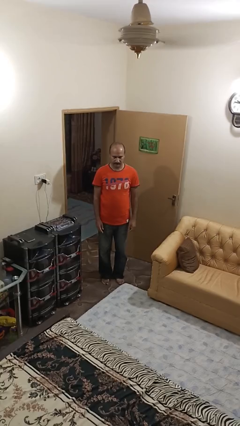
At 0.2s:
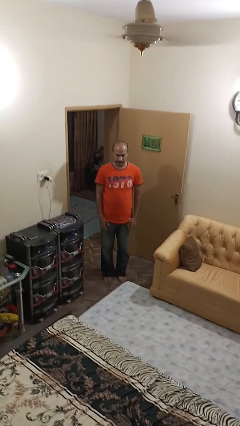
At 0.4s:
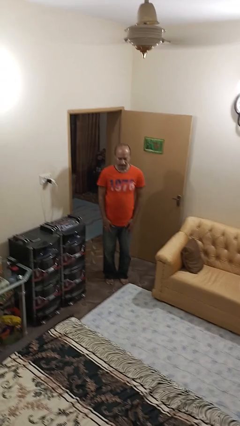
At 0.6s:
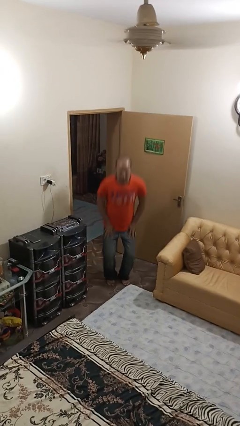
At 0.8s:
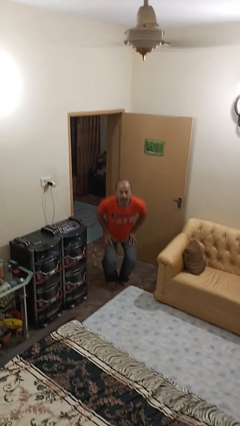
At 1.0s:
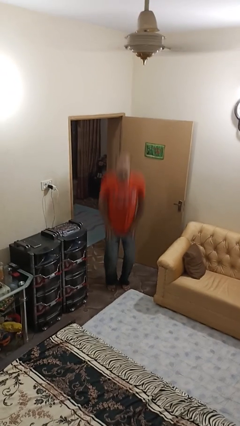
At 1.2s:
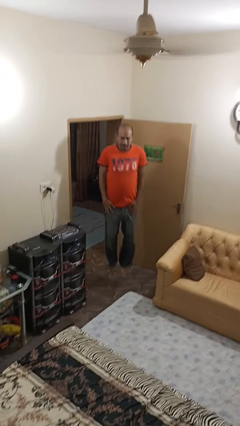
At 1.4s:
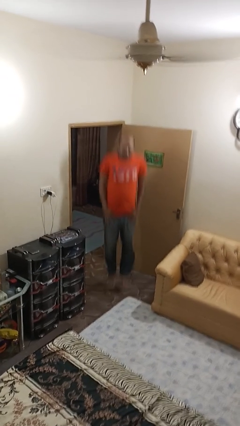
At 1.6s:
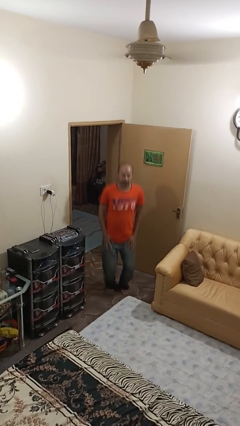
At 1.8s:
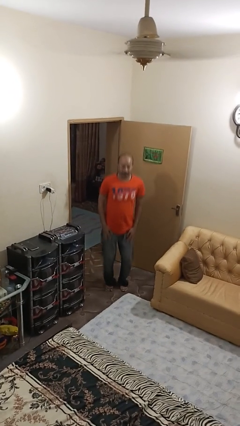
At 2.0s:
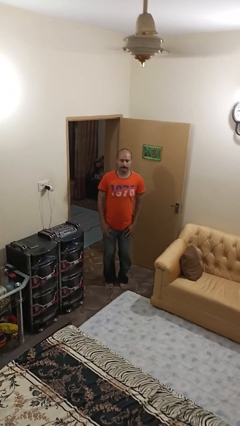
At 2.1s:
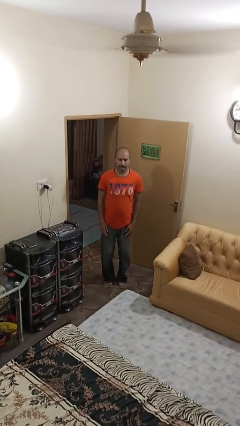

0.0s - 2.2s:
person jumps

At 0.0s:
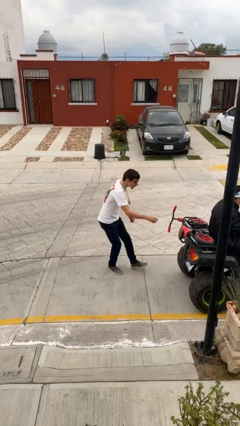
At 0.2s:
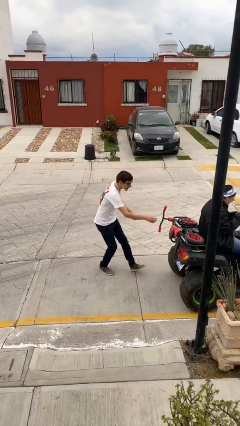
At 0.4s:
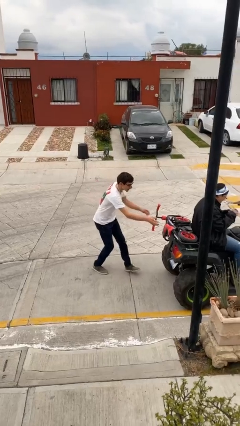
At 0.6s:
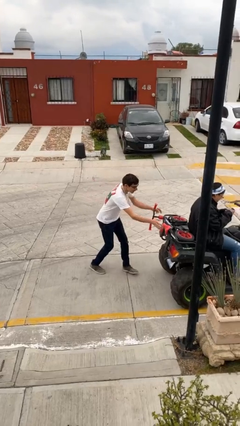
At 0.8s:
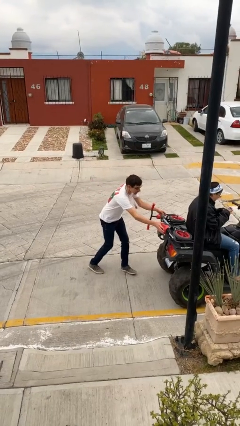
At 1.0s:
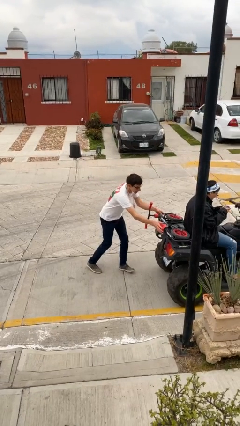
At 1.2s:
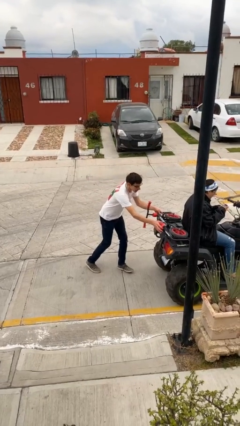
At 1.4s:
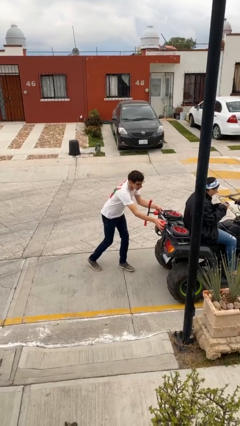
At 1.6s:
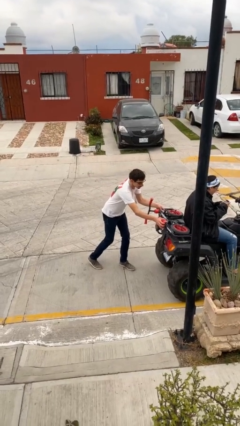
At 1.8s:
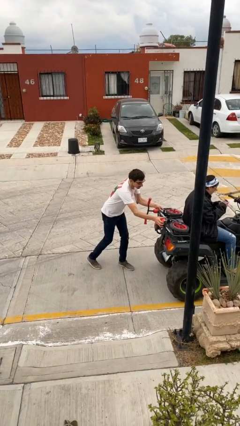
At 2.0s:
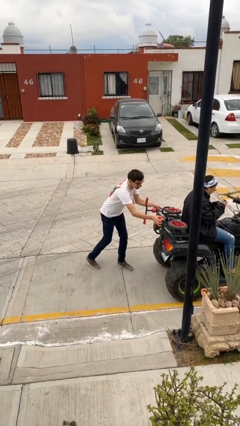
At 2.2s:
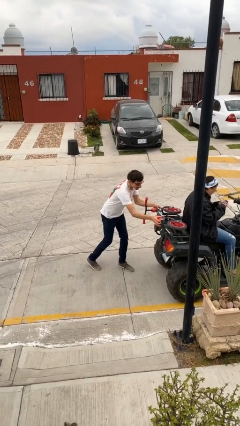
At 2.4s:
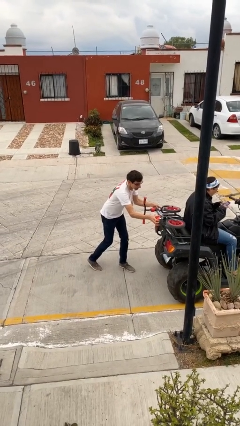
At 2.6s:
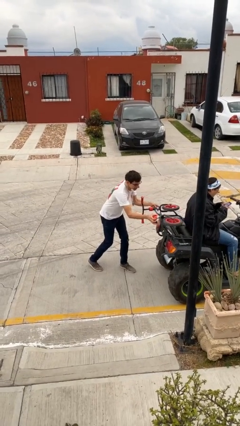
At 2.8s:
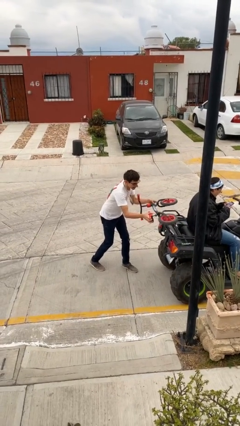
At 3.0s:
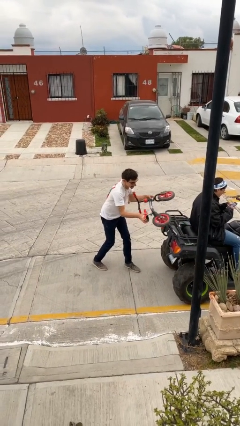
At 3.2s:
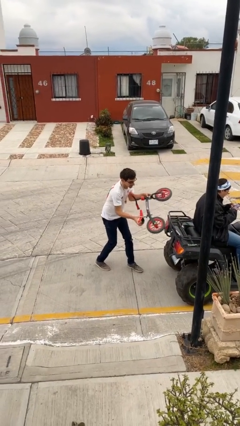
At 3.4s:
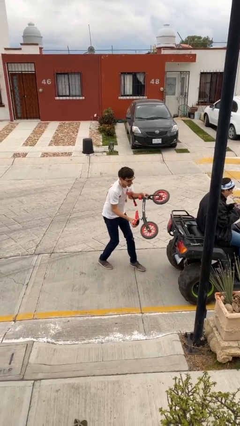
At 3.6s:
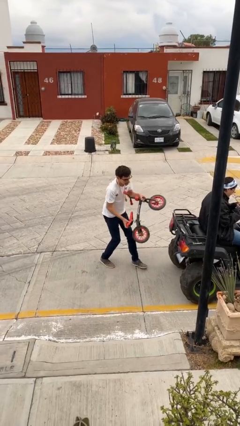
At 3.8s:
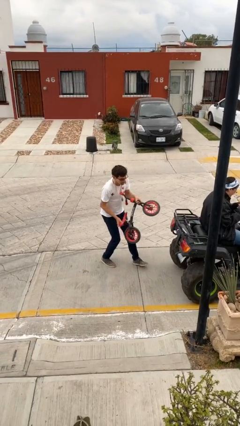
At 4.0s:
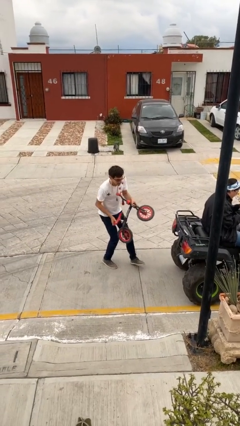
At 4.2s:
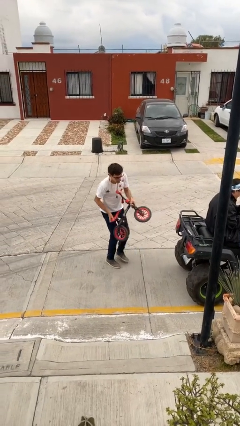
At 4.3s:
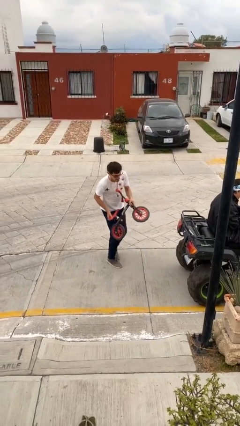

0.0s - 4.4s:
person steals object from person

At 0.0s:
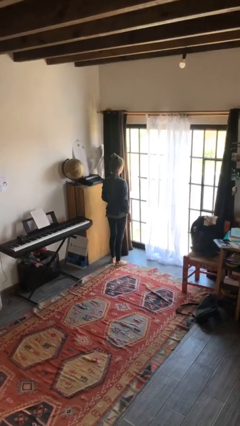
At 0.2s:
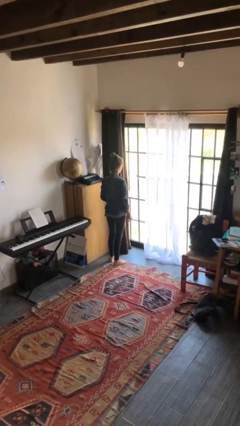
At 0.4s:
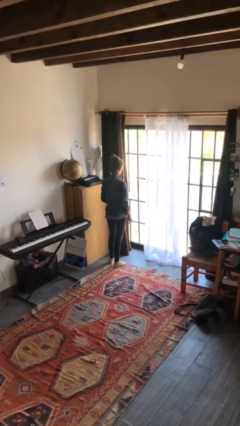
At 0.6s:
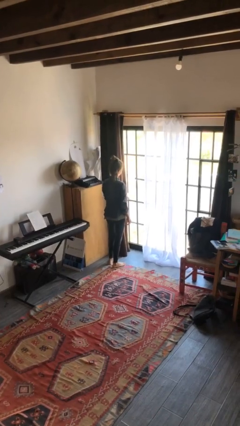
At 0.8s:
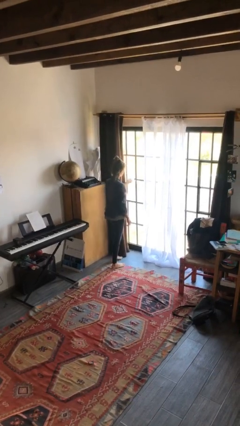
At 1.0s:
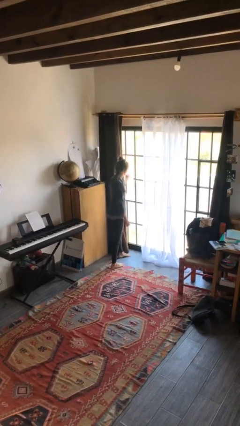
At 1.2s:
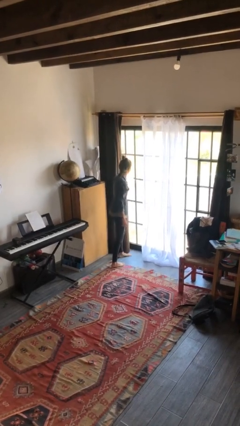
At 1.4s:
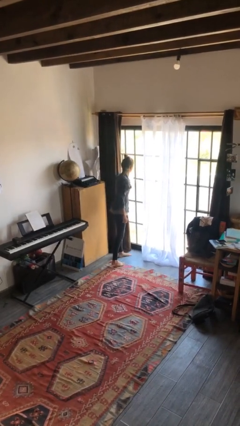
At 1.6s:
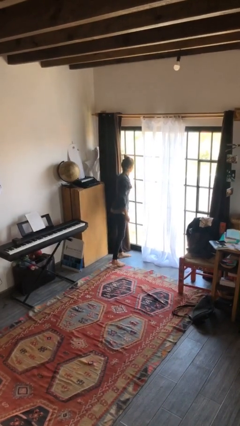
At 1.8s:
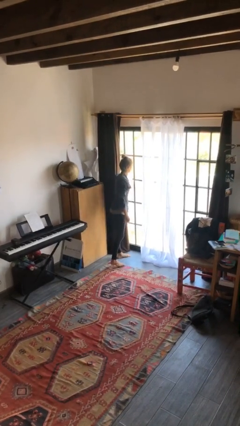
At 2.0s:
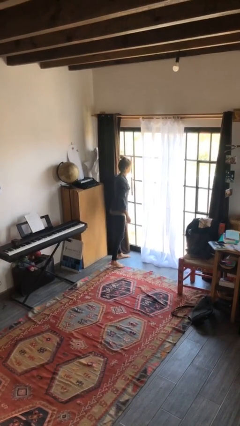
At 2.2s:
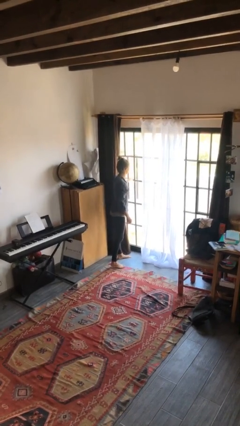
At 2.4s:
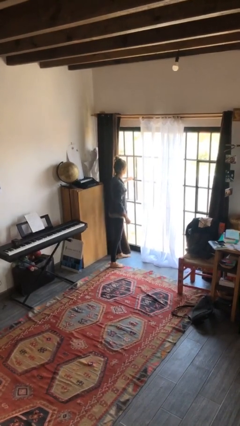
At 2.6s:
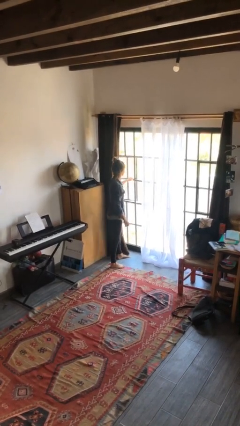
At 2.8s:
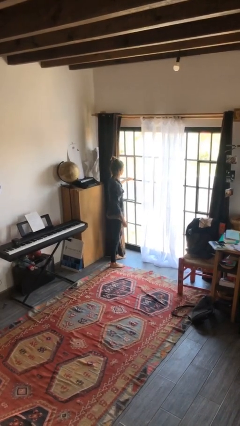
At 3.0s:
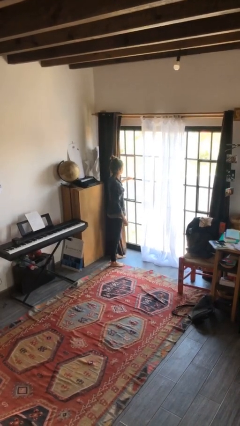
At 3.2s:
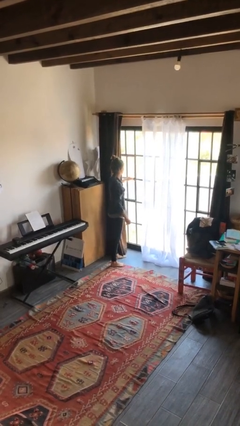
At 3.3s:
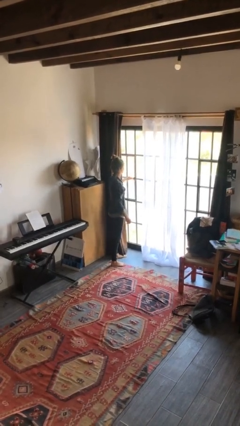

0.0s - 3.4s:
person closes home window

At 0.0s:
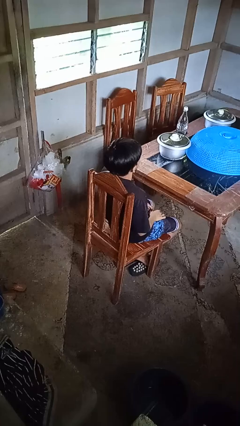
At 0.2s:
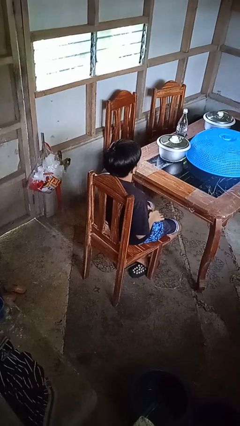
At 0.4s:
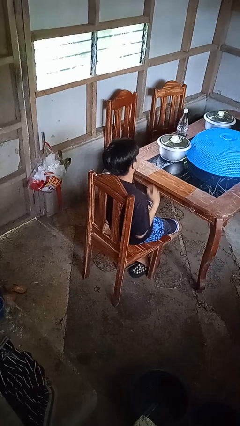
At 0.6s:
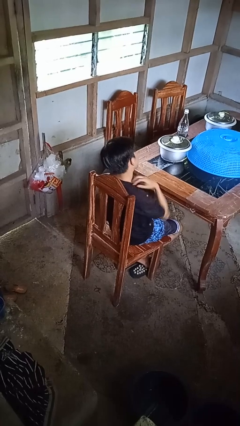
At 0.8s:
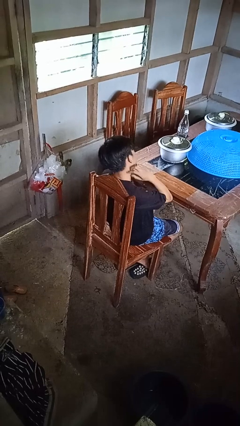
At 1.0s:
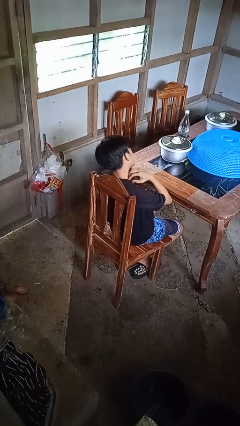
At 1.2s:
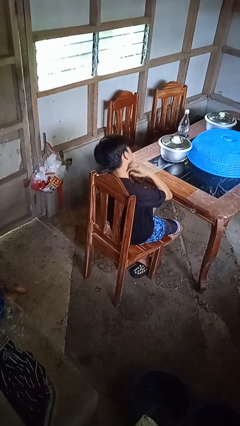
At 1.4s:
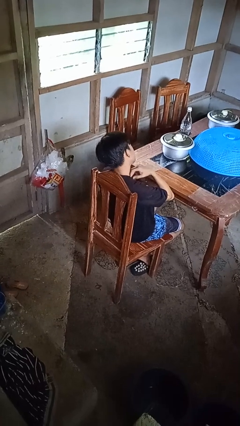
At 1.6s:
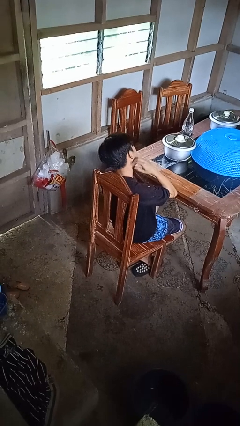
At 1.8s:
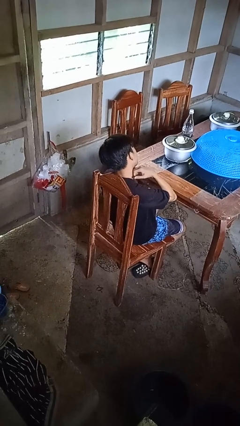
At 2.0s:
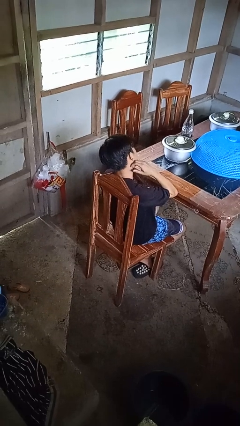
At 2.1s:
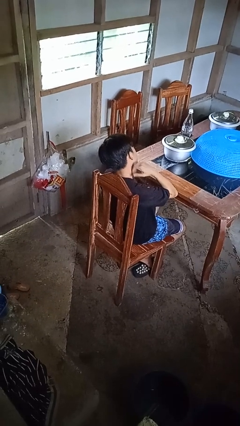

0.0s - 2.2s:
person rubs neck

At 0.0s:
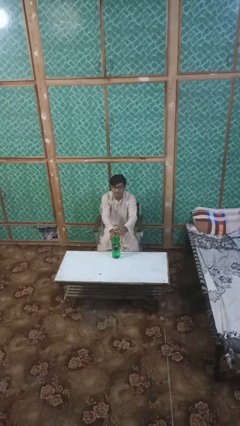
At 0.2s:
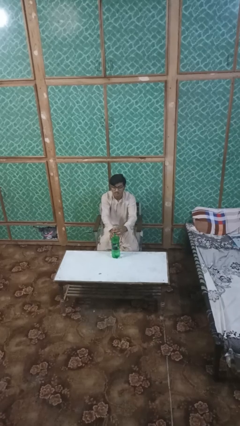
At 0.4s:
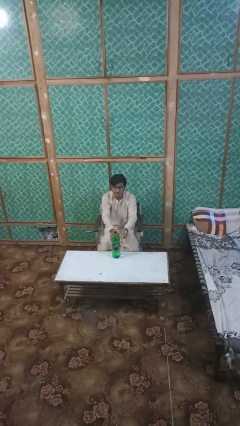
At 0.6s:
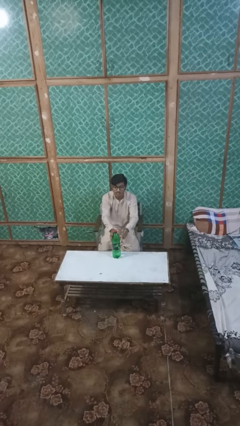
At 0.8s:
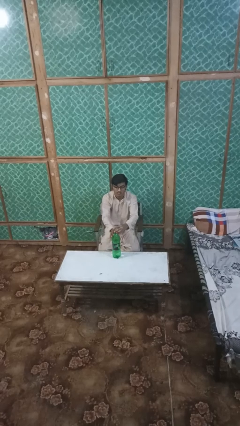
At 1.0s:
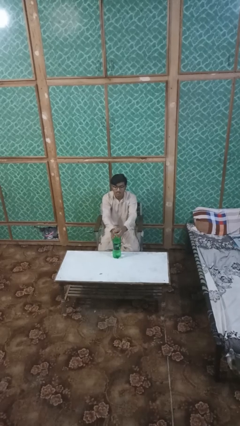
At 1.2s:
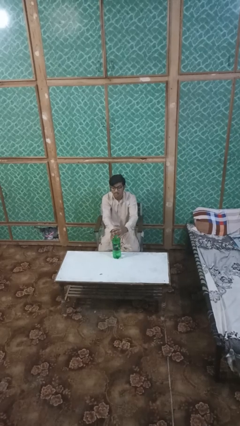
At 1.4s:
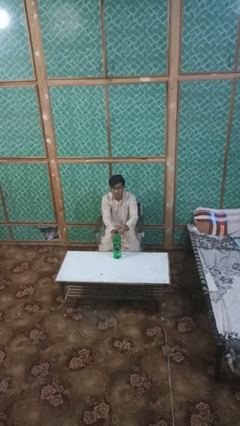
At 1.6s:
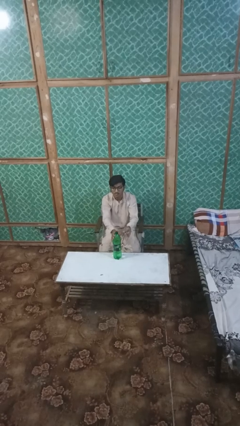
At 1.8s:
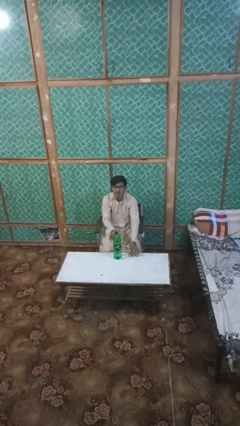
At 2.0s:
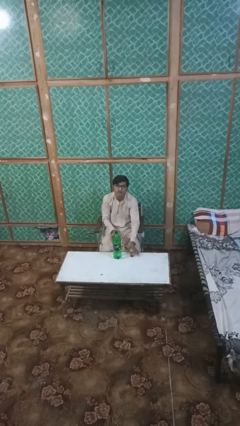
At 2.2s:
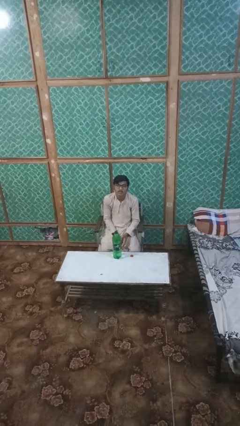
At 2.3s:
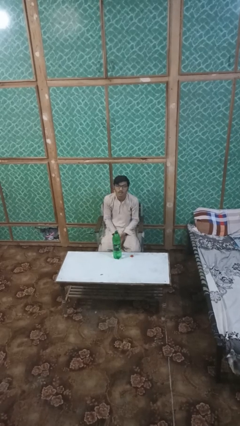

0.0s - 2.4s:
person unscrews lid from bottle

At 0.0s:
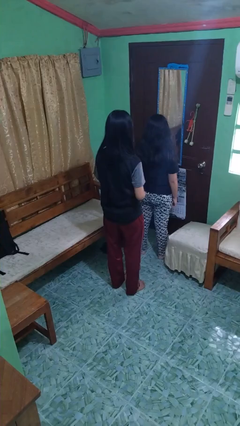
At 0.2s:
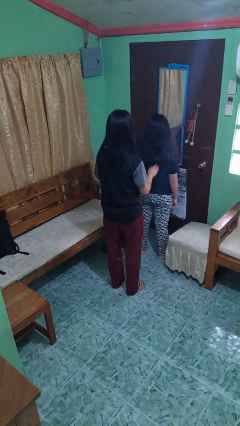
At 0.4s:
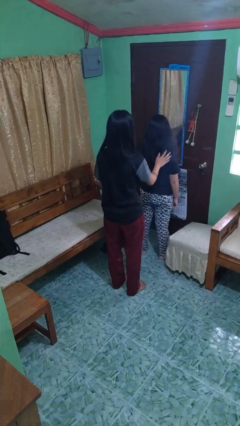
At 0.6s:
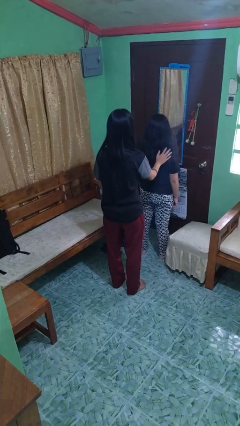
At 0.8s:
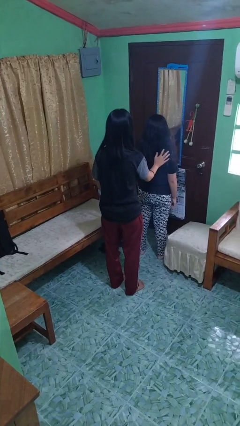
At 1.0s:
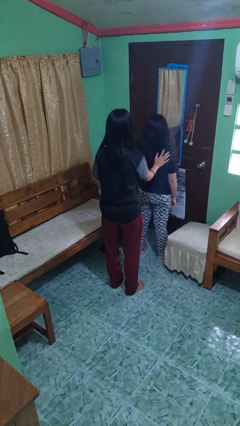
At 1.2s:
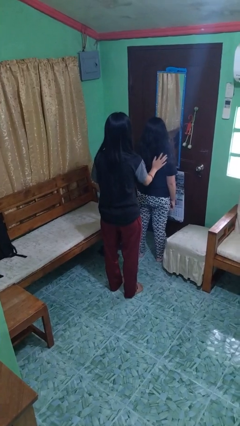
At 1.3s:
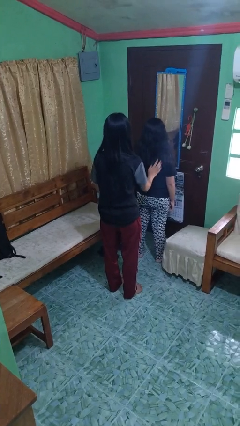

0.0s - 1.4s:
person touches back of person

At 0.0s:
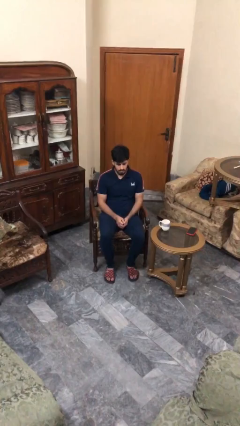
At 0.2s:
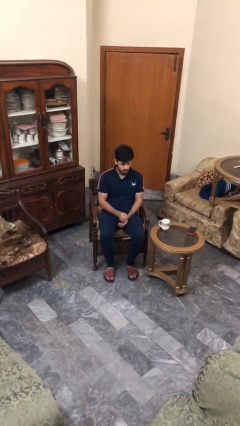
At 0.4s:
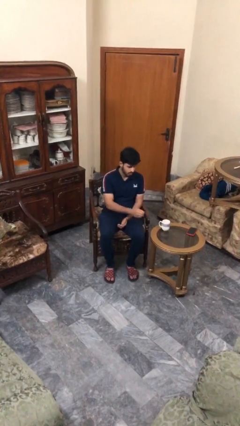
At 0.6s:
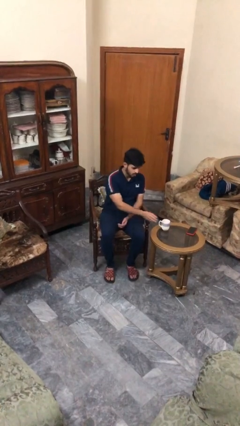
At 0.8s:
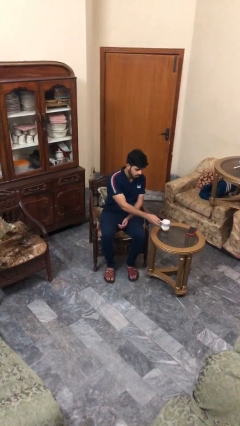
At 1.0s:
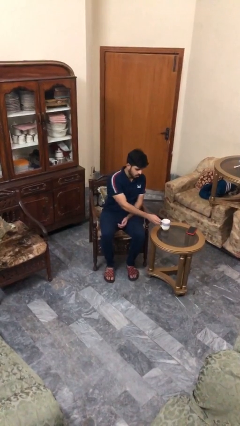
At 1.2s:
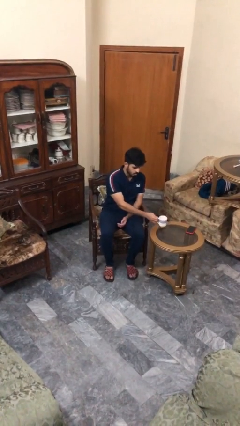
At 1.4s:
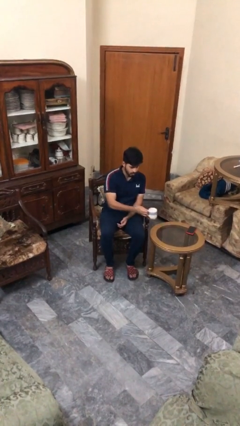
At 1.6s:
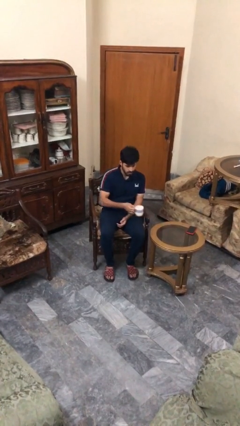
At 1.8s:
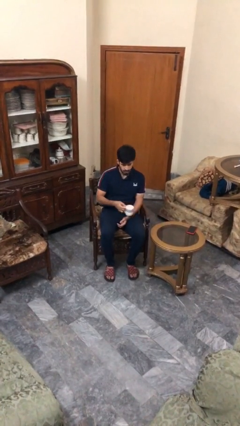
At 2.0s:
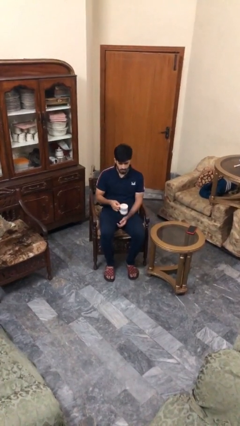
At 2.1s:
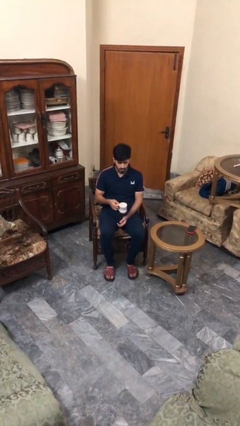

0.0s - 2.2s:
person picks up object from table
